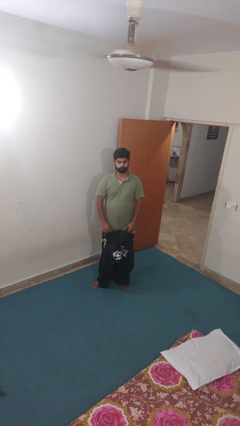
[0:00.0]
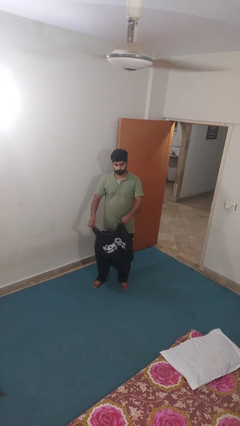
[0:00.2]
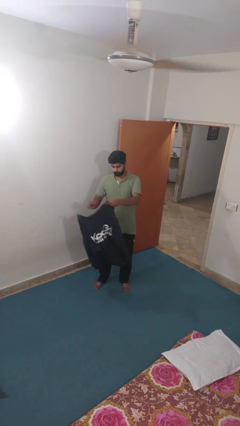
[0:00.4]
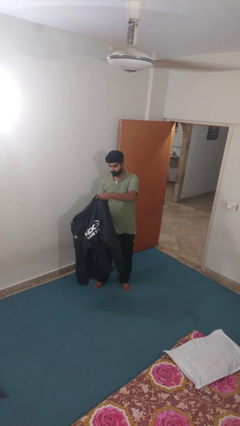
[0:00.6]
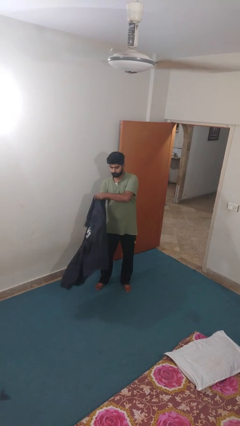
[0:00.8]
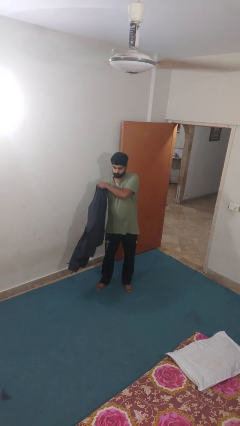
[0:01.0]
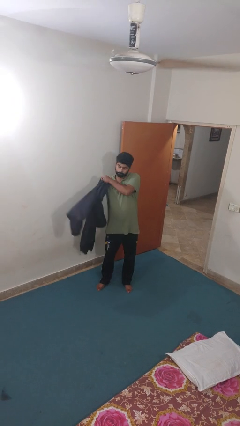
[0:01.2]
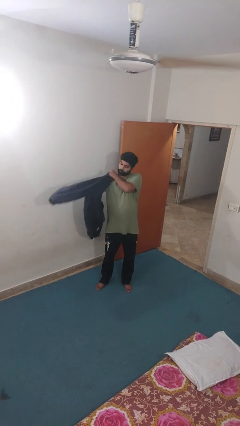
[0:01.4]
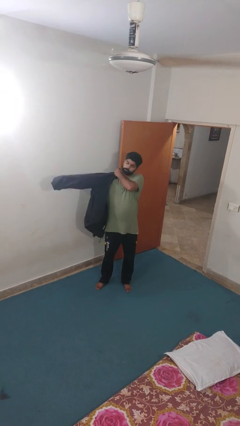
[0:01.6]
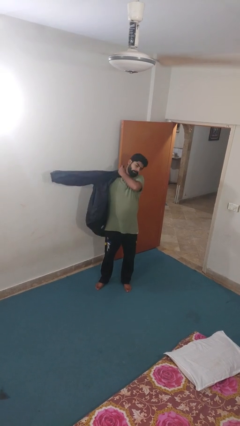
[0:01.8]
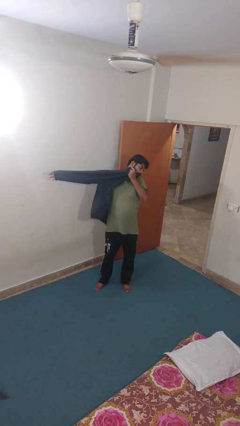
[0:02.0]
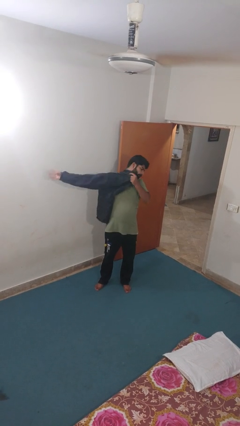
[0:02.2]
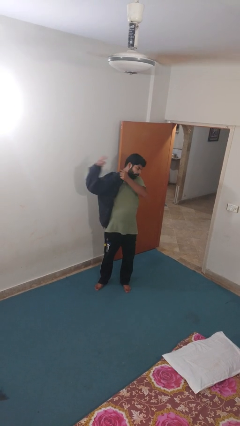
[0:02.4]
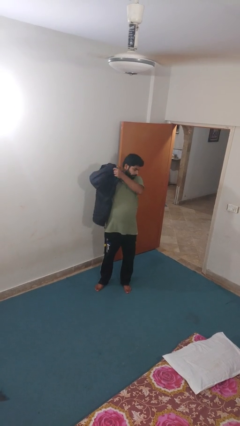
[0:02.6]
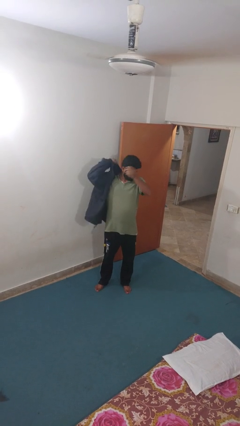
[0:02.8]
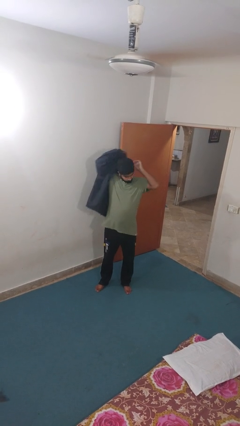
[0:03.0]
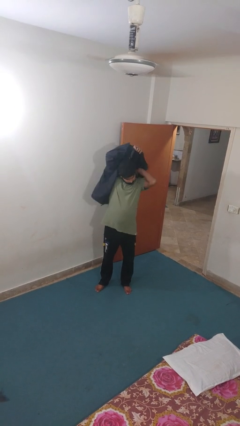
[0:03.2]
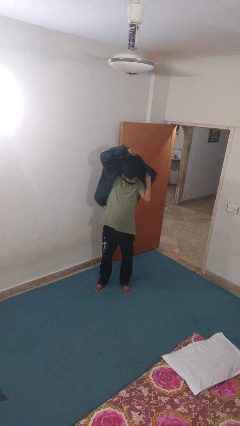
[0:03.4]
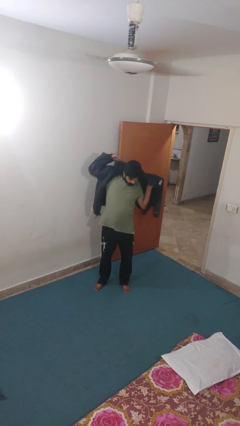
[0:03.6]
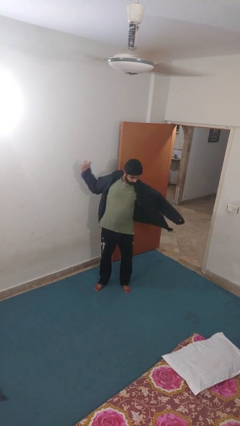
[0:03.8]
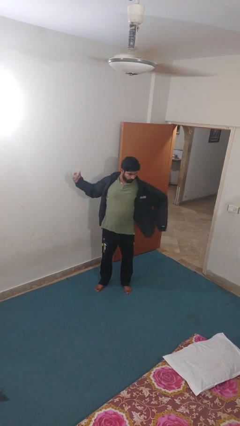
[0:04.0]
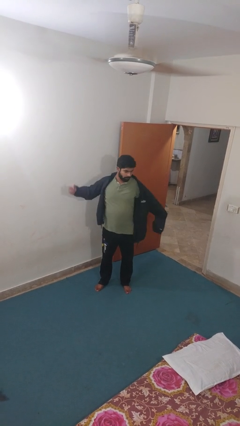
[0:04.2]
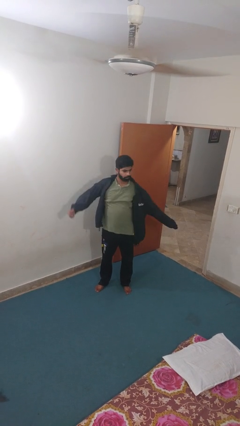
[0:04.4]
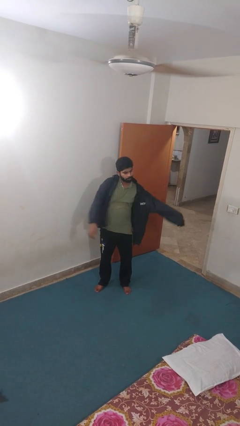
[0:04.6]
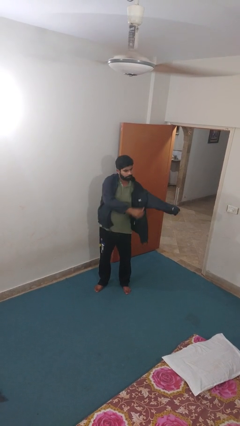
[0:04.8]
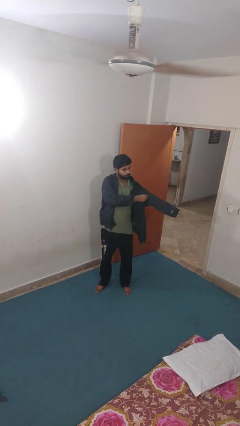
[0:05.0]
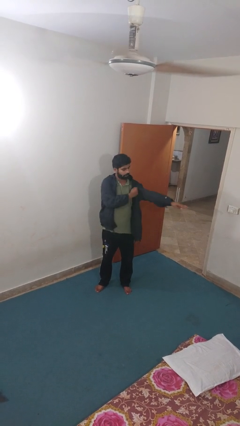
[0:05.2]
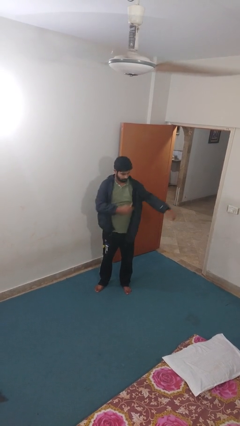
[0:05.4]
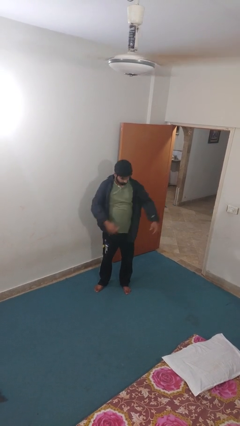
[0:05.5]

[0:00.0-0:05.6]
person puts on jacket

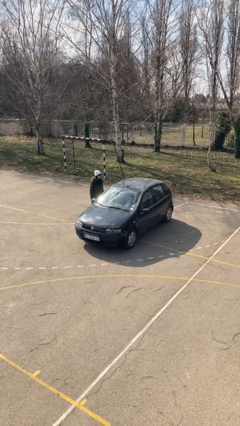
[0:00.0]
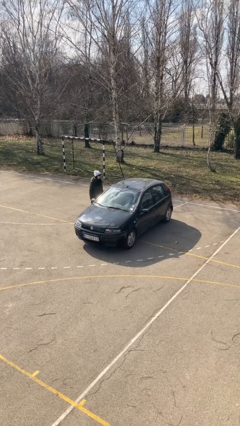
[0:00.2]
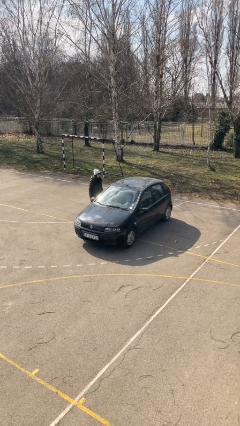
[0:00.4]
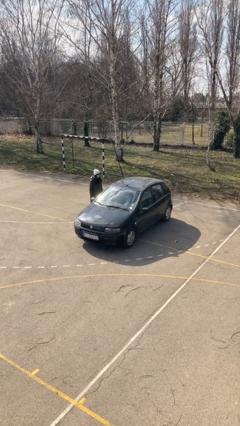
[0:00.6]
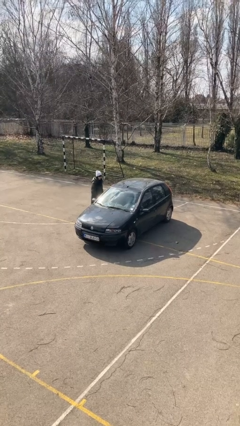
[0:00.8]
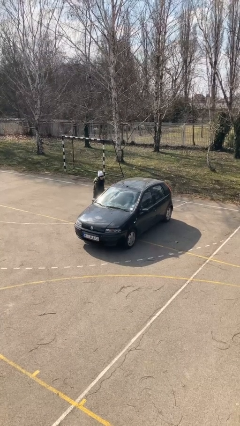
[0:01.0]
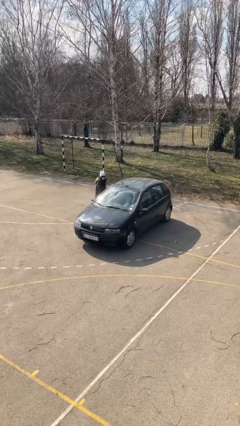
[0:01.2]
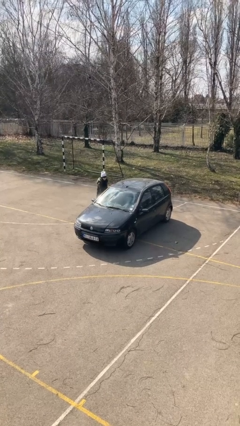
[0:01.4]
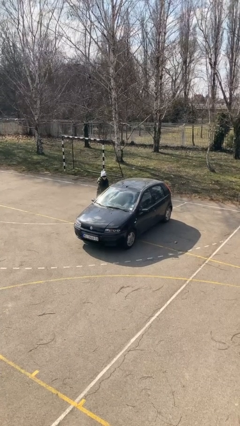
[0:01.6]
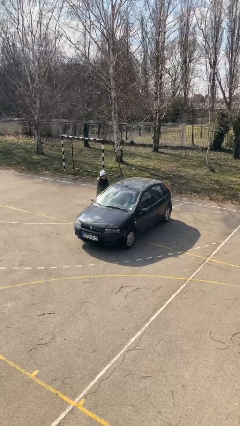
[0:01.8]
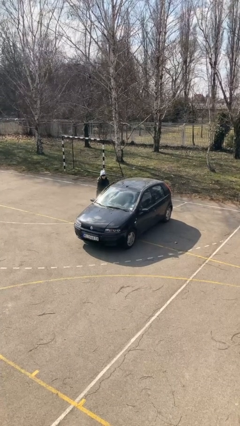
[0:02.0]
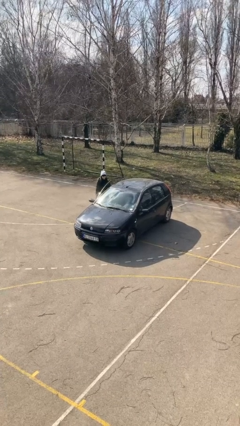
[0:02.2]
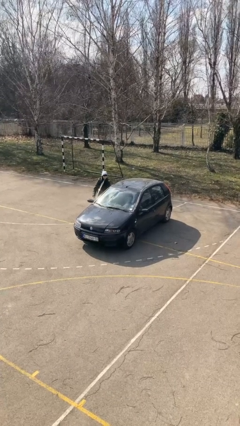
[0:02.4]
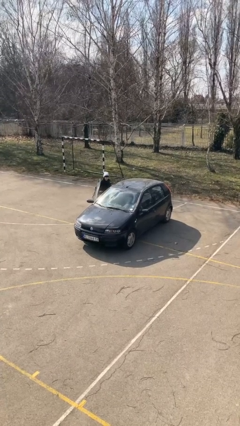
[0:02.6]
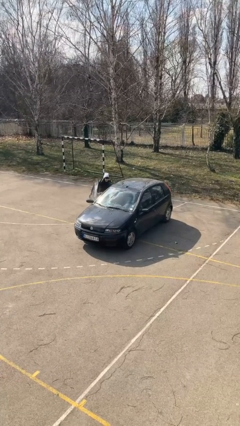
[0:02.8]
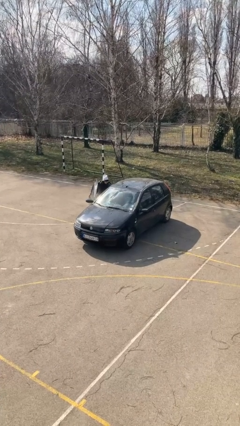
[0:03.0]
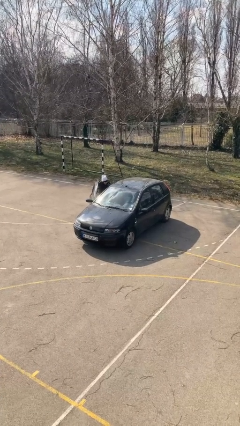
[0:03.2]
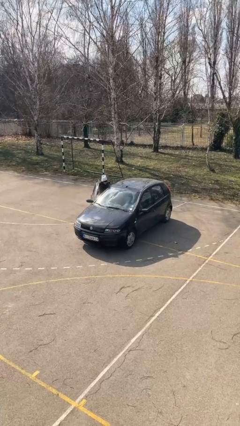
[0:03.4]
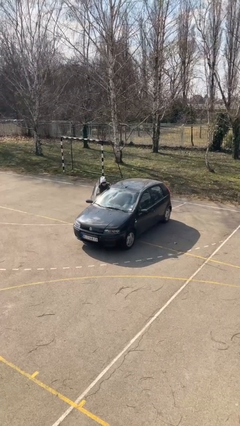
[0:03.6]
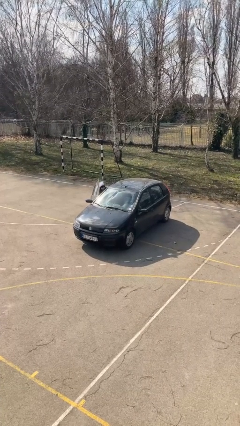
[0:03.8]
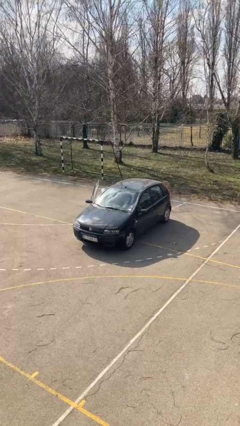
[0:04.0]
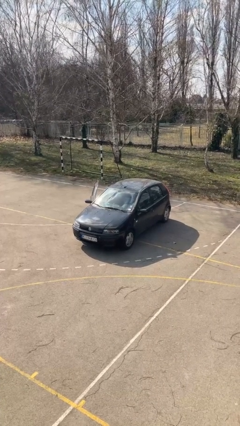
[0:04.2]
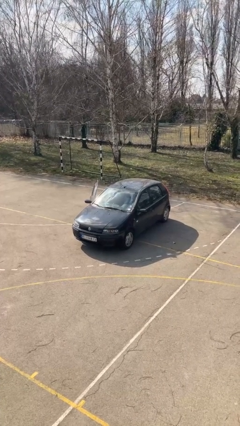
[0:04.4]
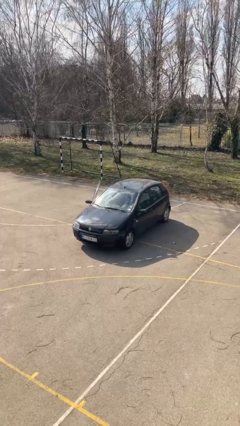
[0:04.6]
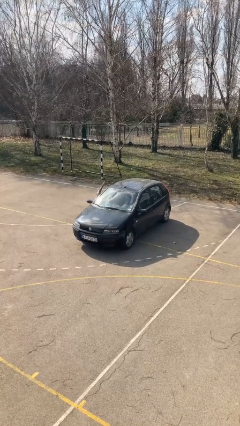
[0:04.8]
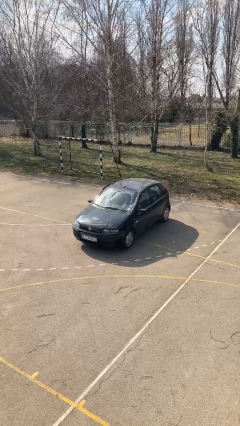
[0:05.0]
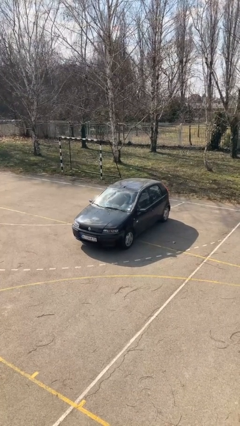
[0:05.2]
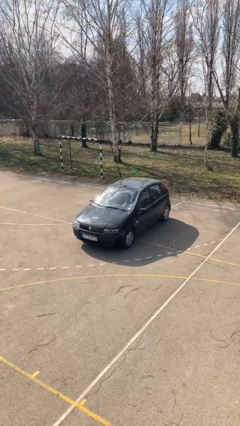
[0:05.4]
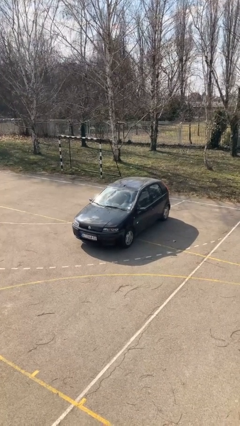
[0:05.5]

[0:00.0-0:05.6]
car picks up person

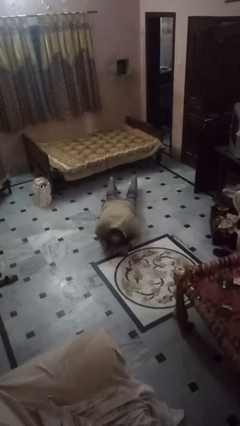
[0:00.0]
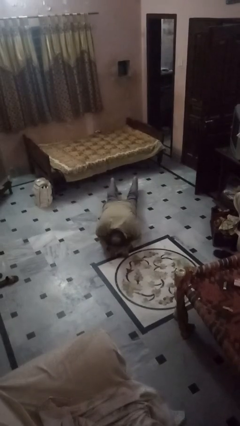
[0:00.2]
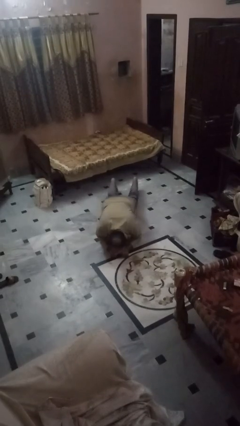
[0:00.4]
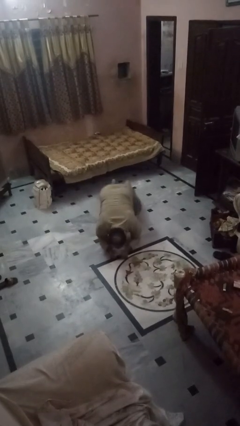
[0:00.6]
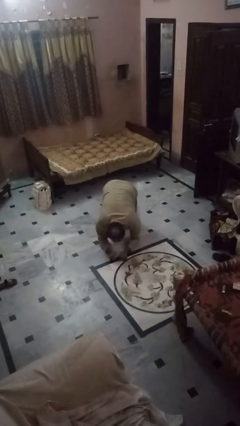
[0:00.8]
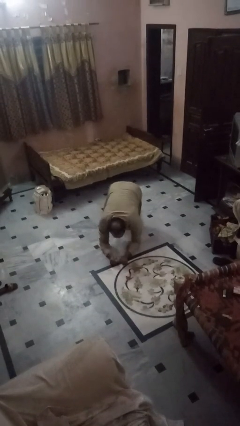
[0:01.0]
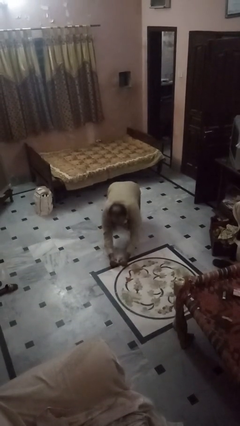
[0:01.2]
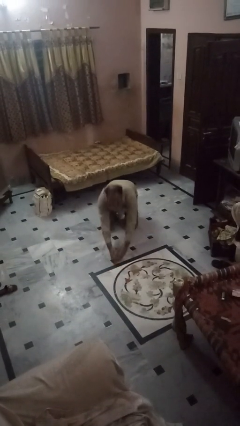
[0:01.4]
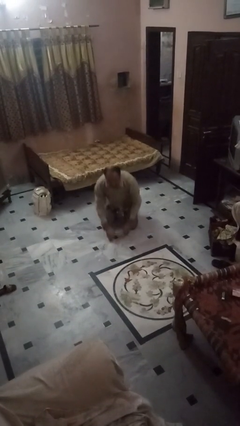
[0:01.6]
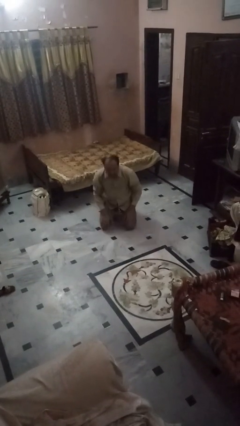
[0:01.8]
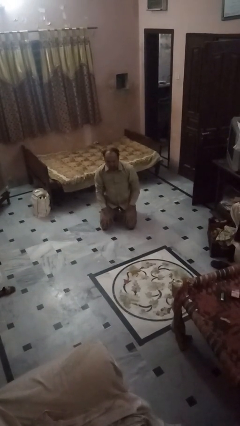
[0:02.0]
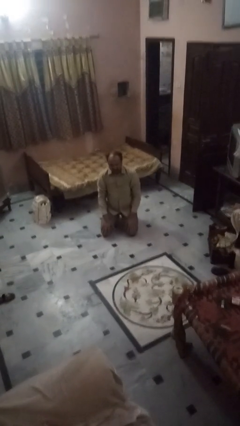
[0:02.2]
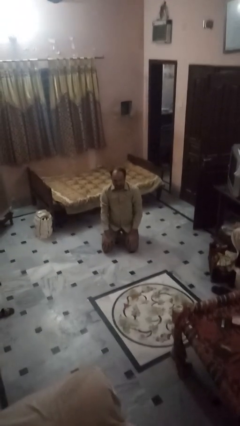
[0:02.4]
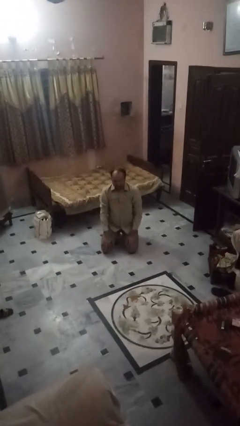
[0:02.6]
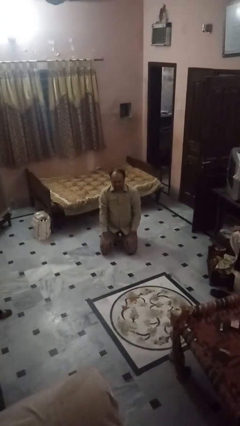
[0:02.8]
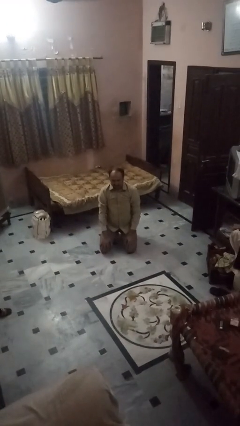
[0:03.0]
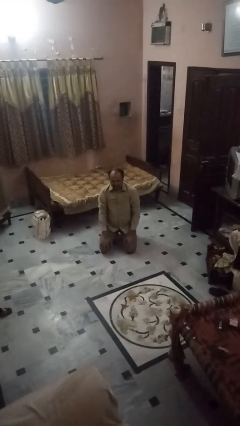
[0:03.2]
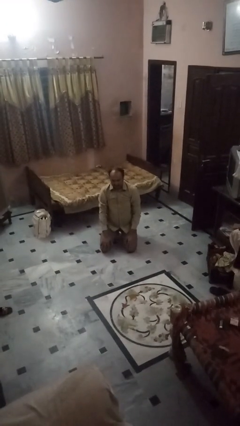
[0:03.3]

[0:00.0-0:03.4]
person stands up from floor

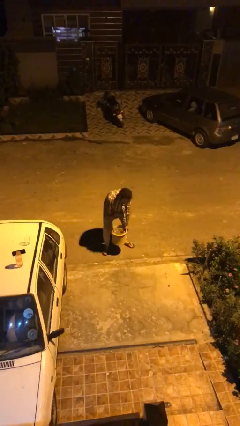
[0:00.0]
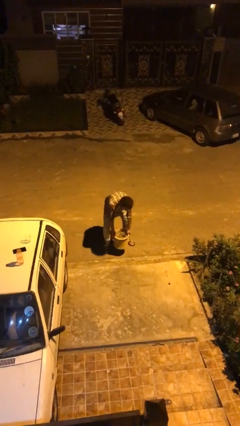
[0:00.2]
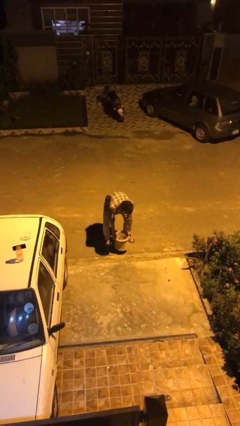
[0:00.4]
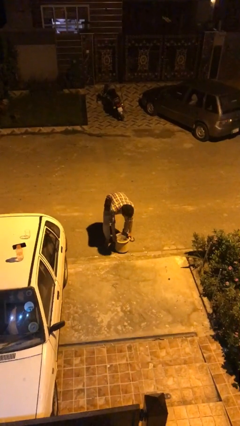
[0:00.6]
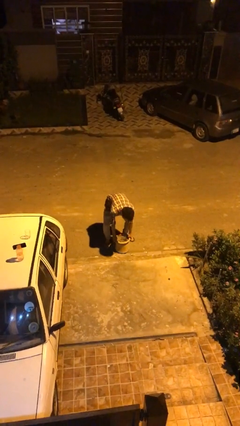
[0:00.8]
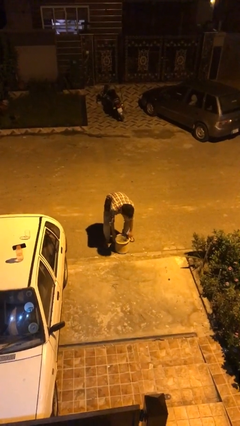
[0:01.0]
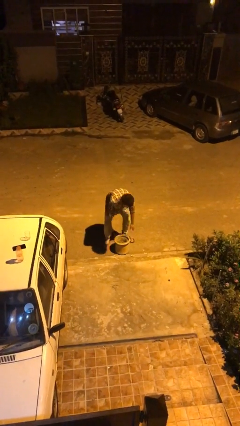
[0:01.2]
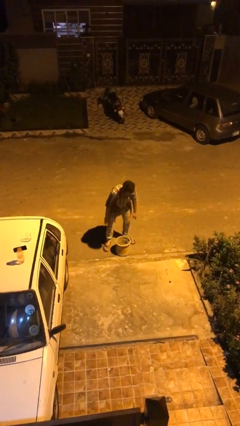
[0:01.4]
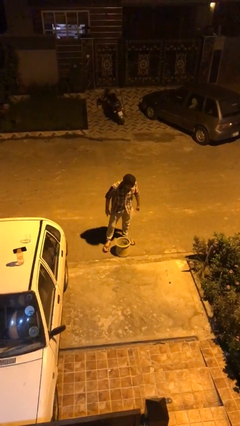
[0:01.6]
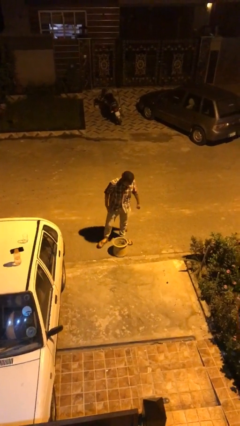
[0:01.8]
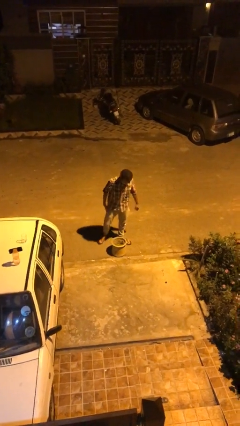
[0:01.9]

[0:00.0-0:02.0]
person puts down object on floor

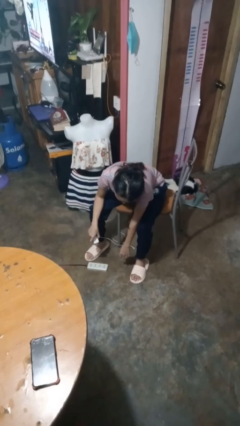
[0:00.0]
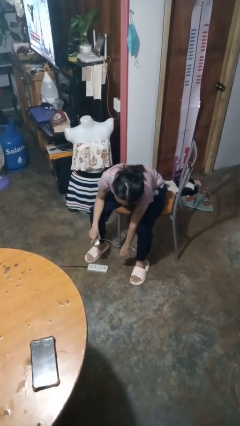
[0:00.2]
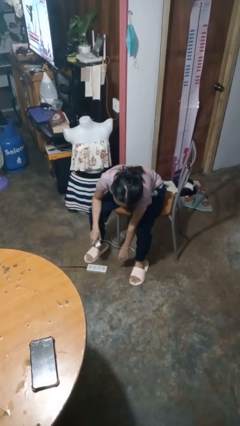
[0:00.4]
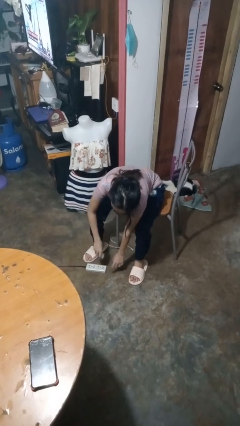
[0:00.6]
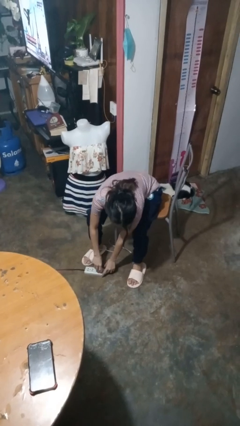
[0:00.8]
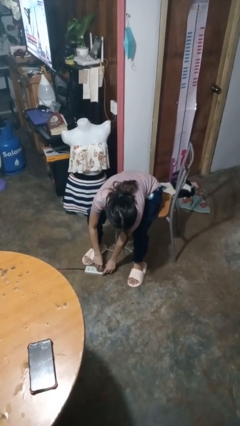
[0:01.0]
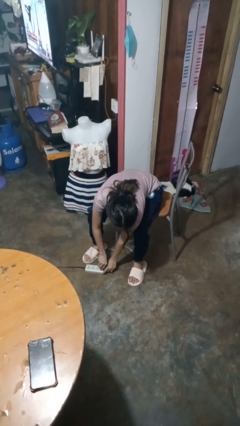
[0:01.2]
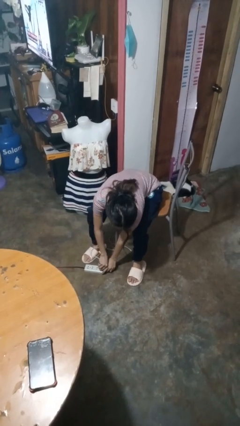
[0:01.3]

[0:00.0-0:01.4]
person plugs into electrical socket
